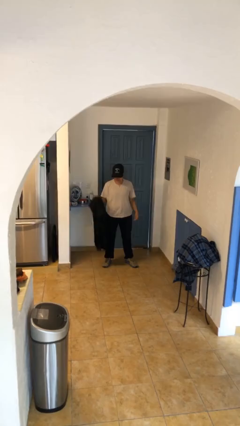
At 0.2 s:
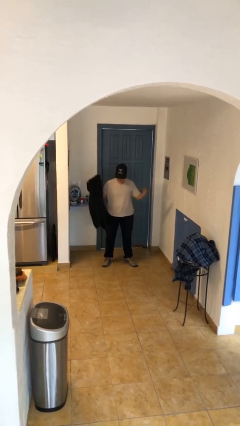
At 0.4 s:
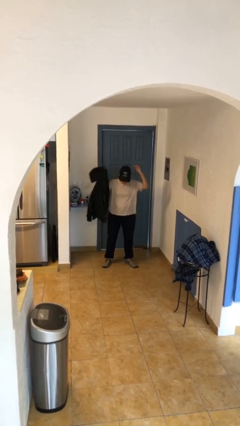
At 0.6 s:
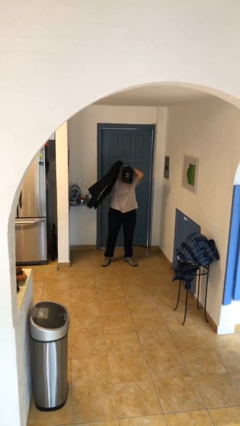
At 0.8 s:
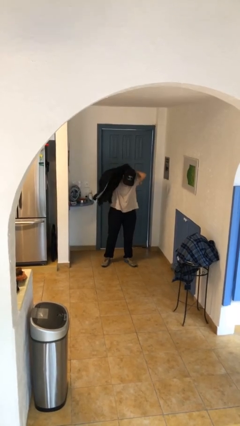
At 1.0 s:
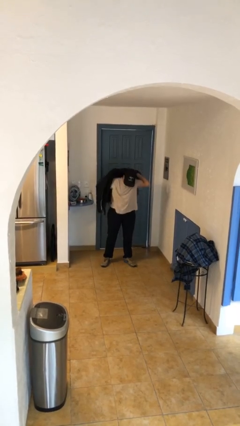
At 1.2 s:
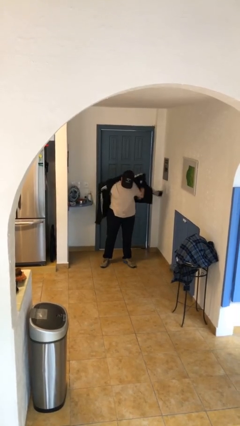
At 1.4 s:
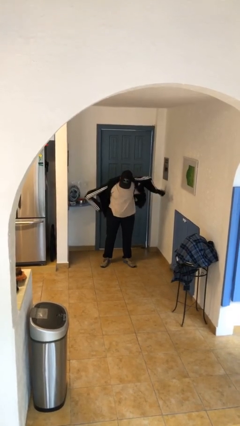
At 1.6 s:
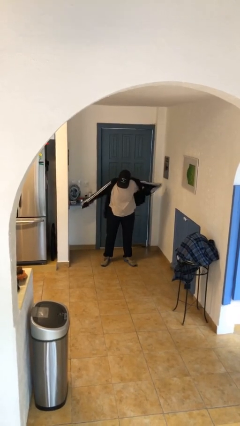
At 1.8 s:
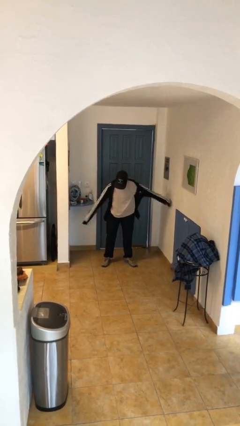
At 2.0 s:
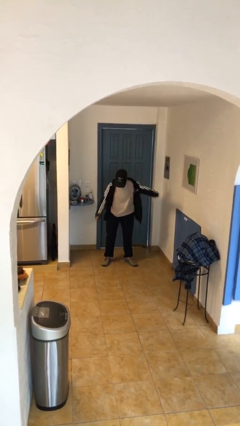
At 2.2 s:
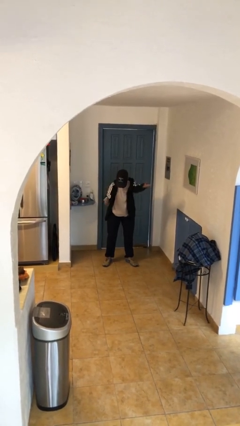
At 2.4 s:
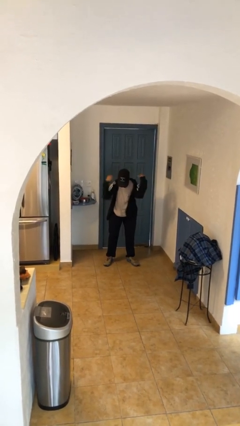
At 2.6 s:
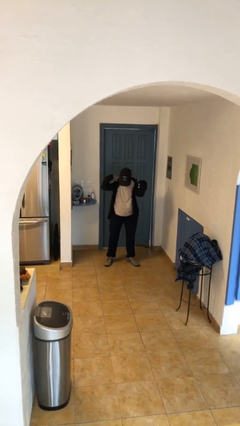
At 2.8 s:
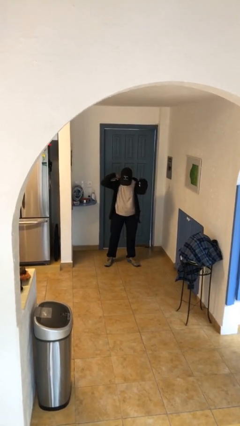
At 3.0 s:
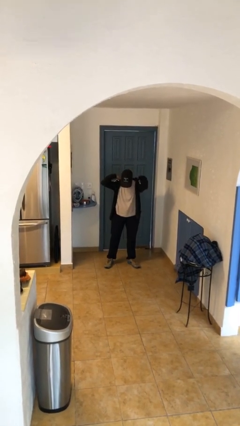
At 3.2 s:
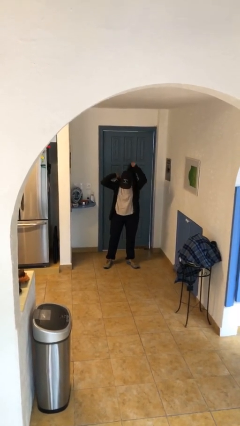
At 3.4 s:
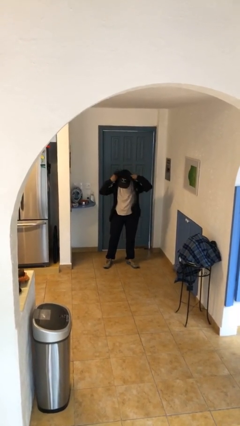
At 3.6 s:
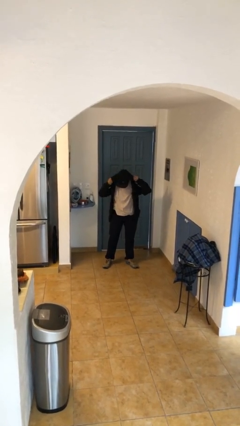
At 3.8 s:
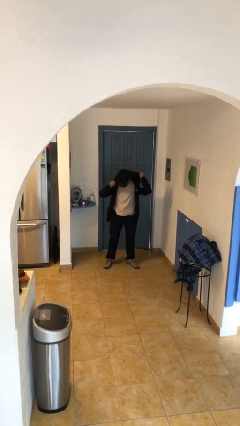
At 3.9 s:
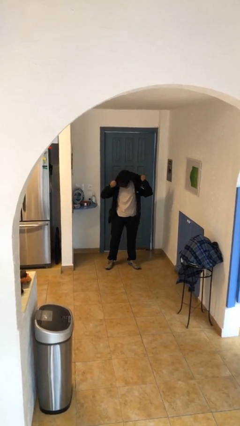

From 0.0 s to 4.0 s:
person puts on hoodie

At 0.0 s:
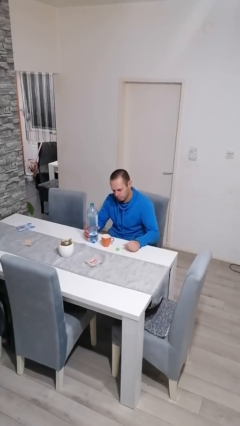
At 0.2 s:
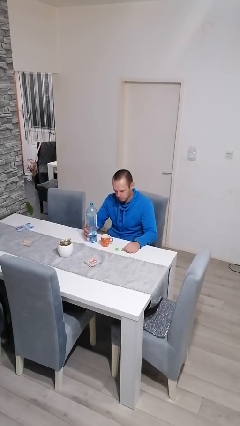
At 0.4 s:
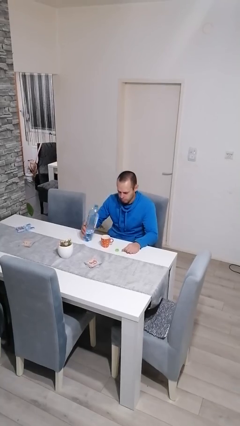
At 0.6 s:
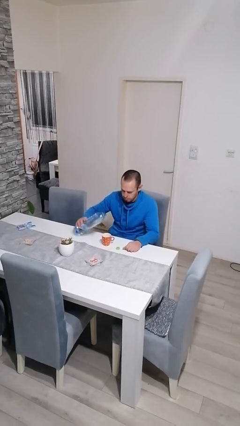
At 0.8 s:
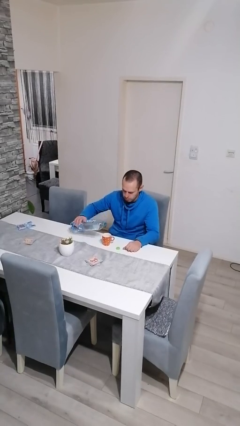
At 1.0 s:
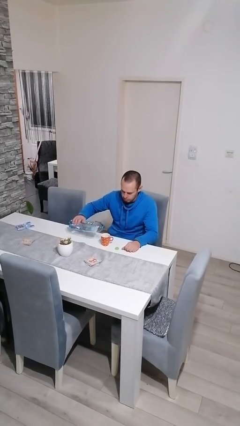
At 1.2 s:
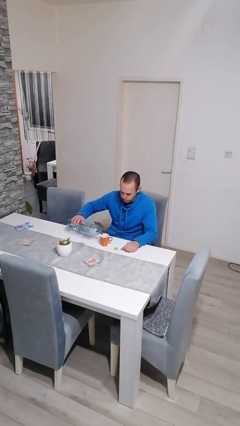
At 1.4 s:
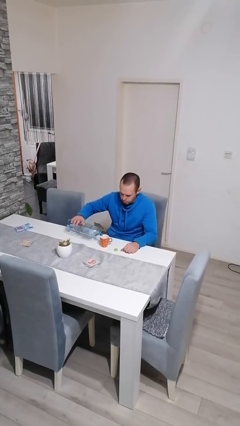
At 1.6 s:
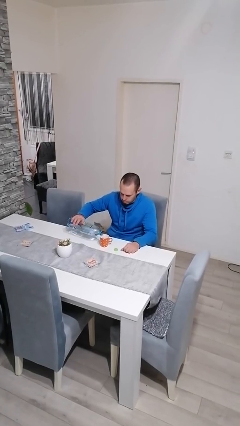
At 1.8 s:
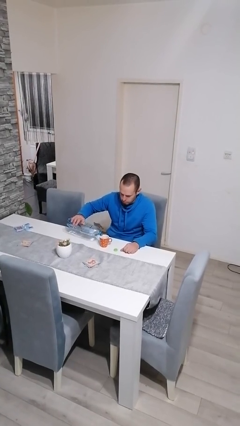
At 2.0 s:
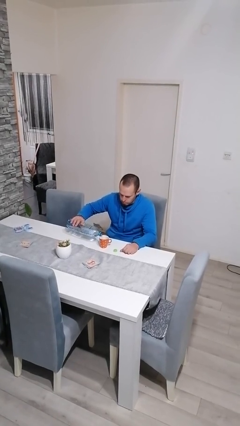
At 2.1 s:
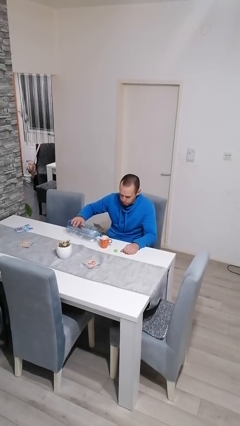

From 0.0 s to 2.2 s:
person pours liquid into cup

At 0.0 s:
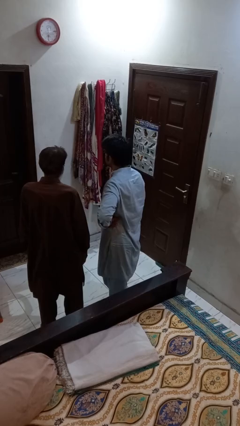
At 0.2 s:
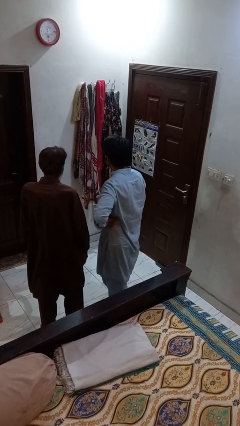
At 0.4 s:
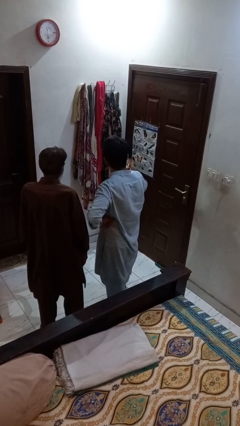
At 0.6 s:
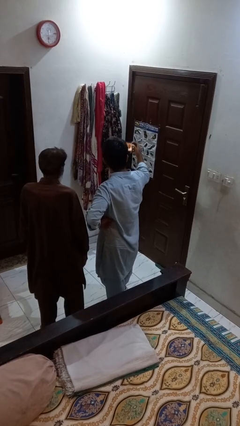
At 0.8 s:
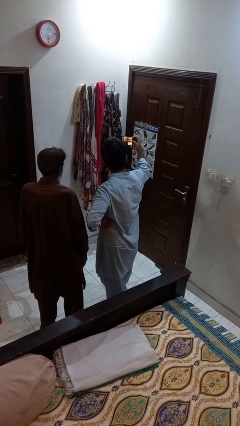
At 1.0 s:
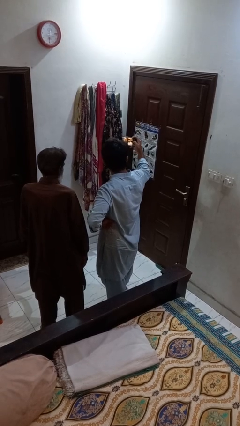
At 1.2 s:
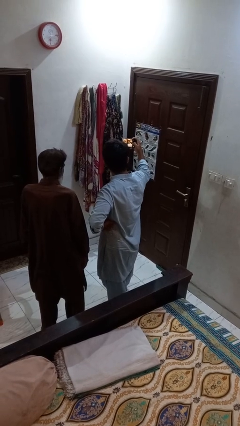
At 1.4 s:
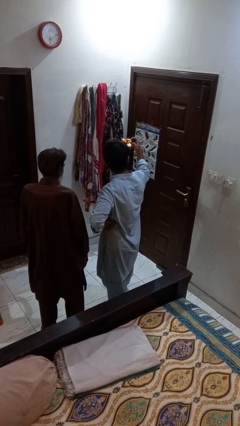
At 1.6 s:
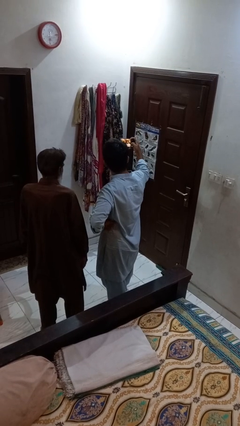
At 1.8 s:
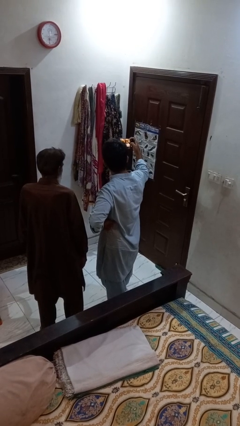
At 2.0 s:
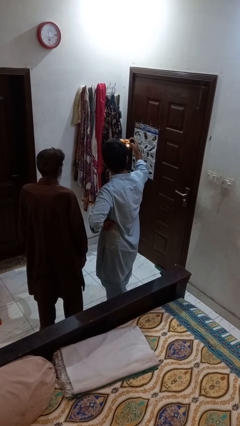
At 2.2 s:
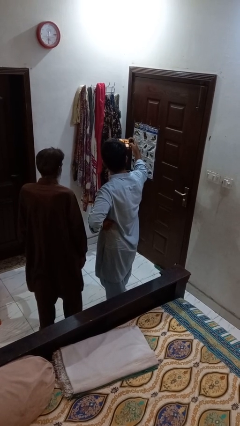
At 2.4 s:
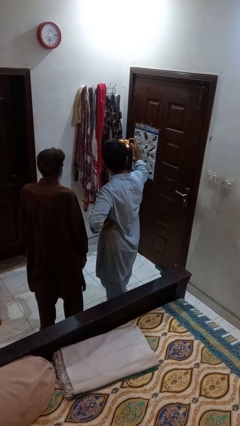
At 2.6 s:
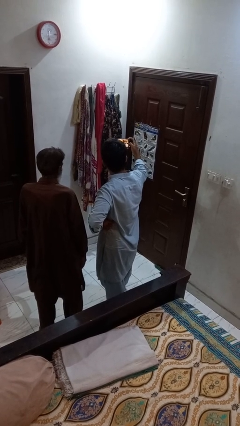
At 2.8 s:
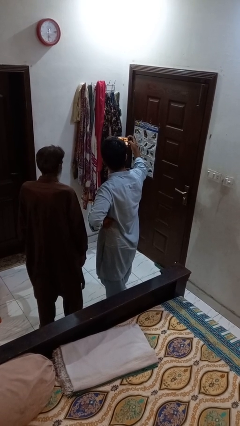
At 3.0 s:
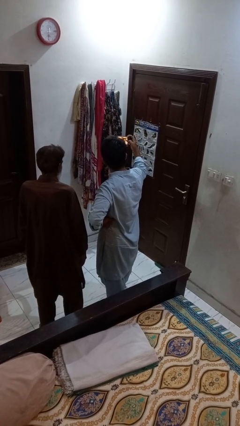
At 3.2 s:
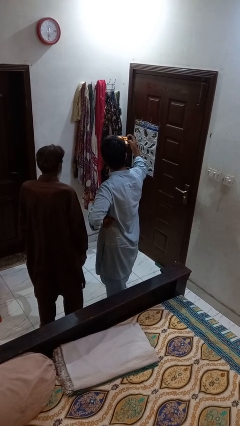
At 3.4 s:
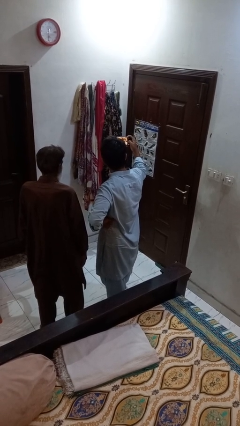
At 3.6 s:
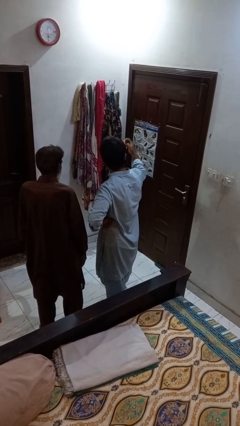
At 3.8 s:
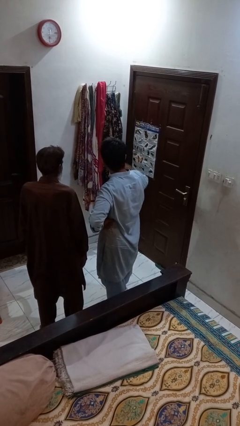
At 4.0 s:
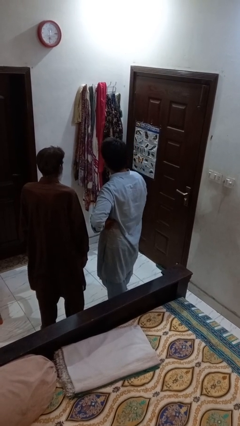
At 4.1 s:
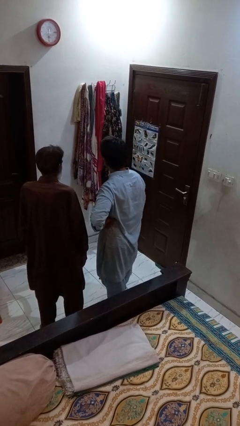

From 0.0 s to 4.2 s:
person takes selfie with person

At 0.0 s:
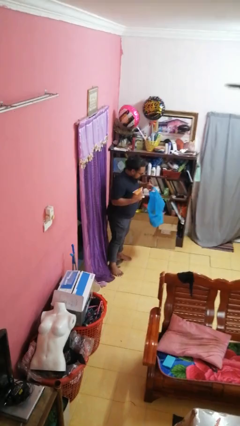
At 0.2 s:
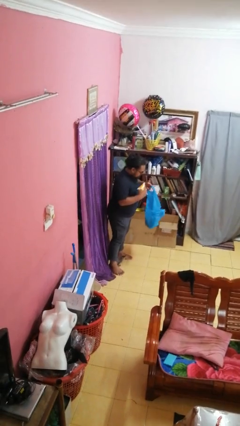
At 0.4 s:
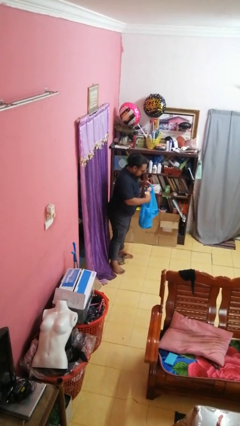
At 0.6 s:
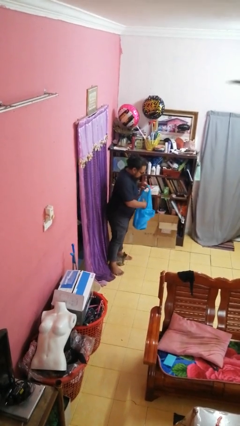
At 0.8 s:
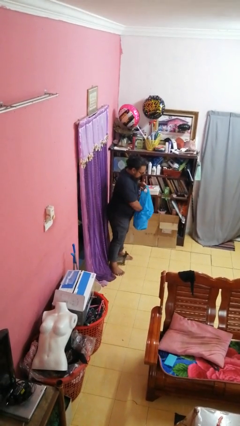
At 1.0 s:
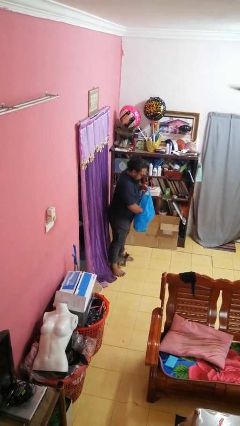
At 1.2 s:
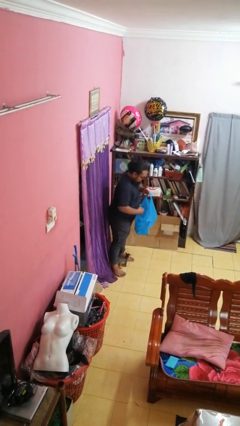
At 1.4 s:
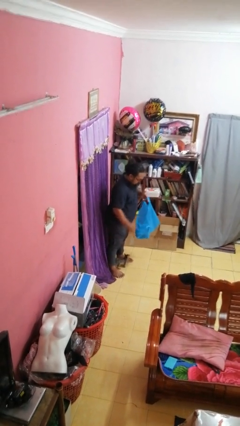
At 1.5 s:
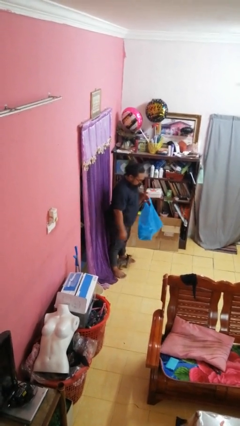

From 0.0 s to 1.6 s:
person puts object into bag

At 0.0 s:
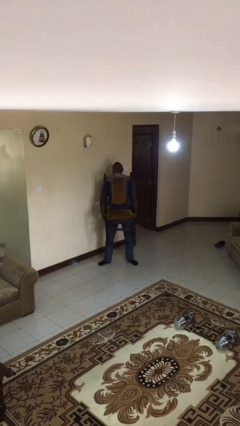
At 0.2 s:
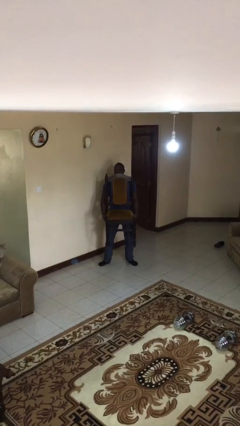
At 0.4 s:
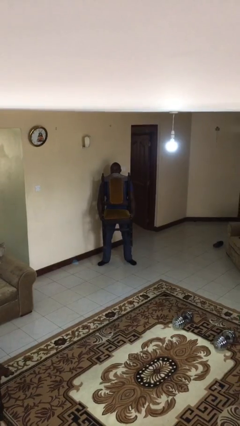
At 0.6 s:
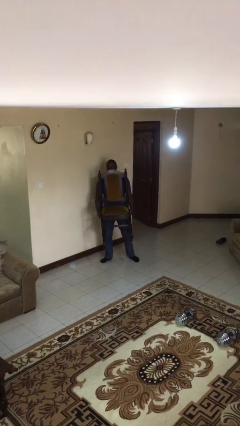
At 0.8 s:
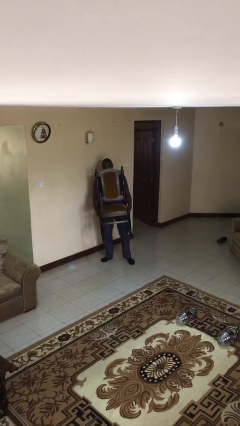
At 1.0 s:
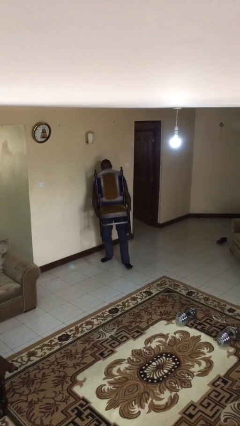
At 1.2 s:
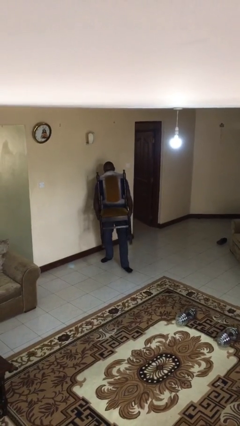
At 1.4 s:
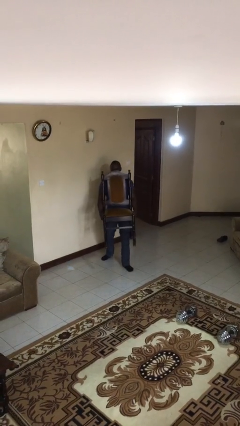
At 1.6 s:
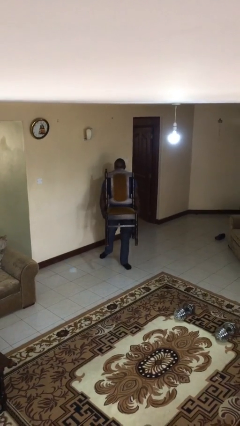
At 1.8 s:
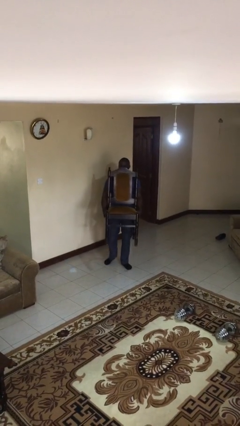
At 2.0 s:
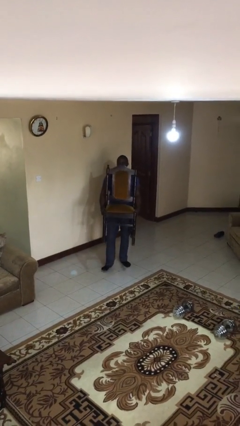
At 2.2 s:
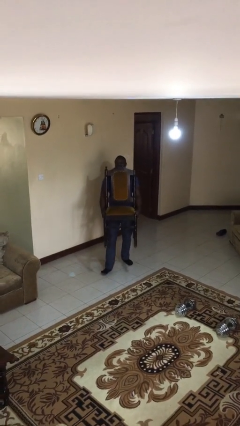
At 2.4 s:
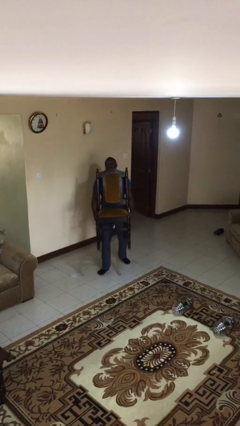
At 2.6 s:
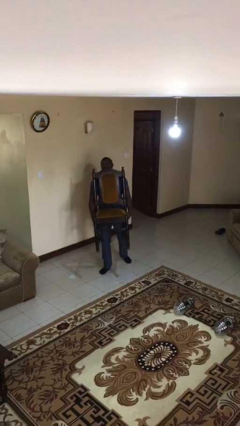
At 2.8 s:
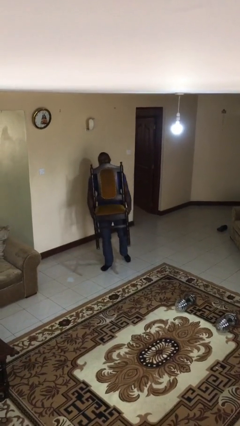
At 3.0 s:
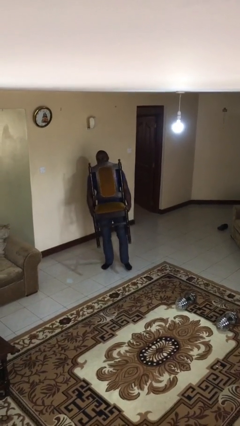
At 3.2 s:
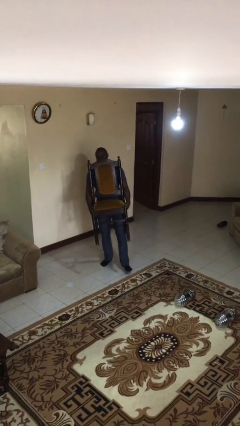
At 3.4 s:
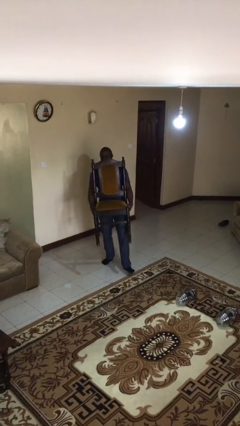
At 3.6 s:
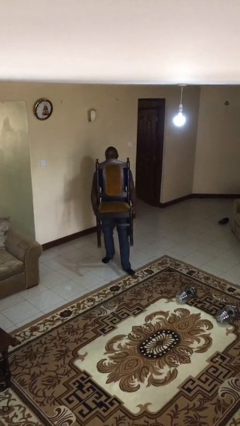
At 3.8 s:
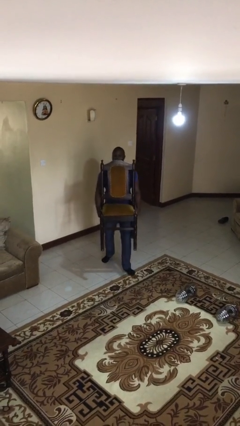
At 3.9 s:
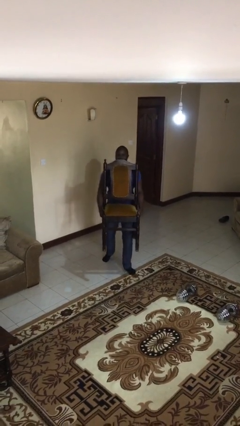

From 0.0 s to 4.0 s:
person carries heavy object

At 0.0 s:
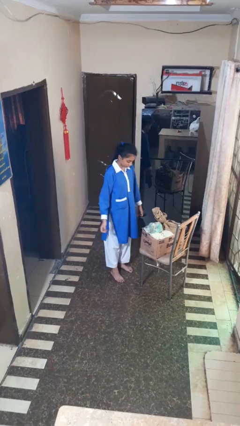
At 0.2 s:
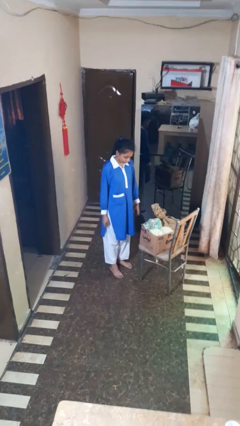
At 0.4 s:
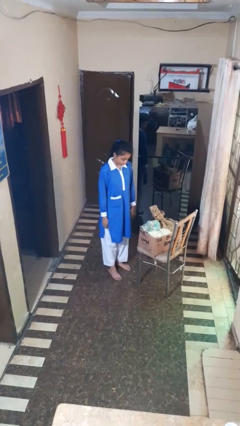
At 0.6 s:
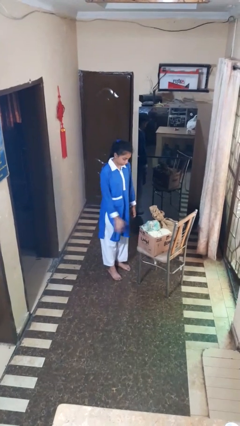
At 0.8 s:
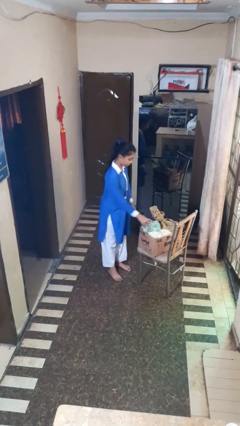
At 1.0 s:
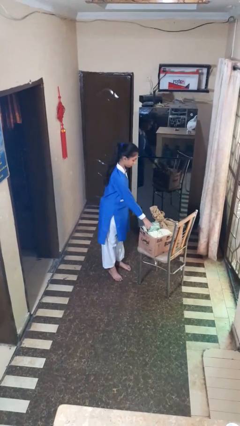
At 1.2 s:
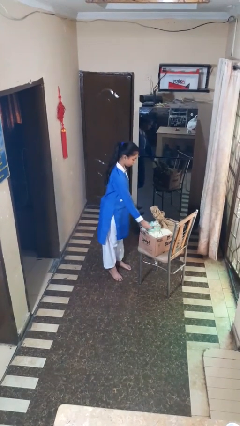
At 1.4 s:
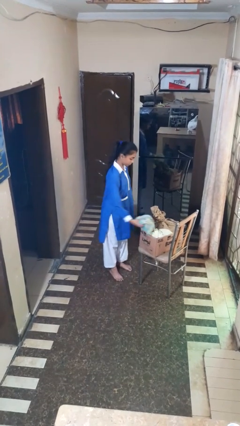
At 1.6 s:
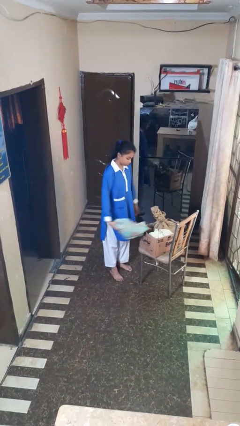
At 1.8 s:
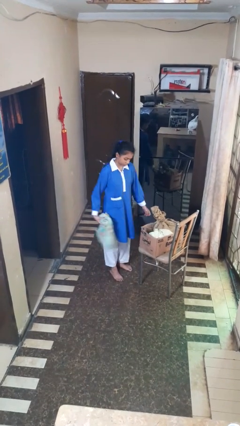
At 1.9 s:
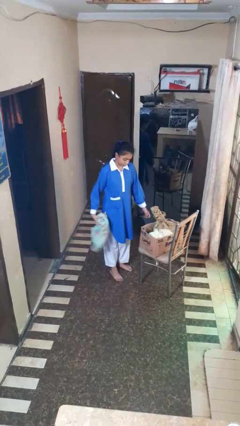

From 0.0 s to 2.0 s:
person takes object from box
